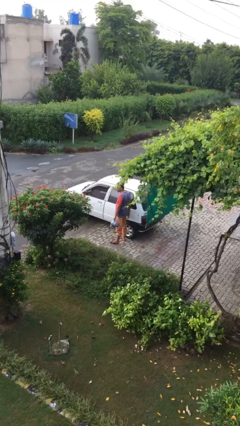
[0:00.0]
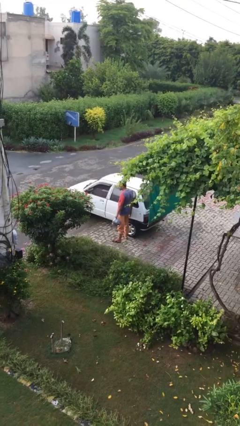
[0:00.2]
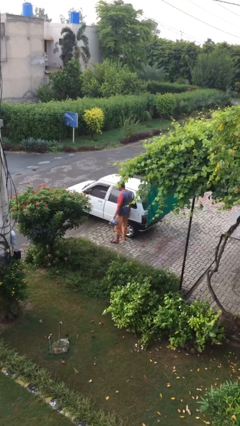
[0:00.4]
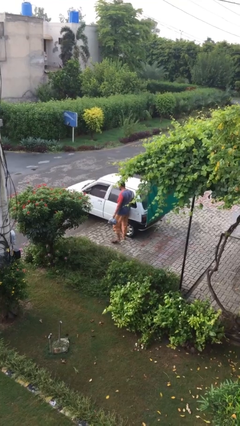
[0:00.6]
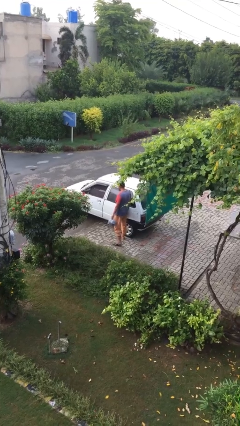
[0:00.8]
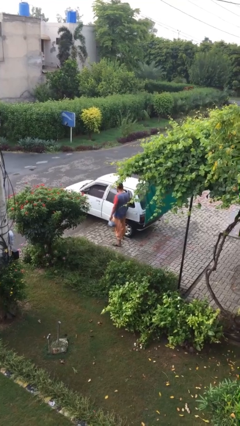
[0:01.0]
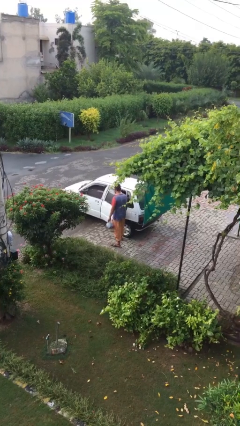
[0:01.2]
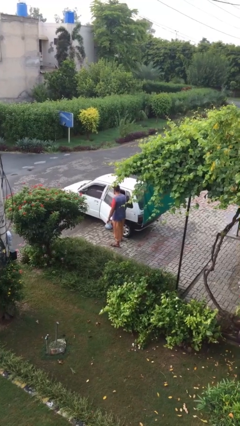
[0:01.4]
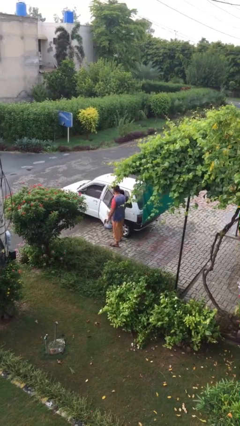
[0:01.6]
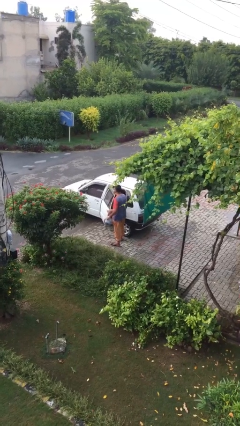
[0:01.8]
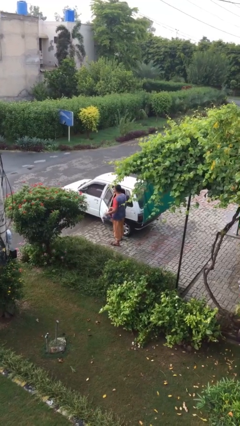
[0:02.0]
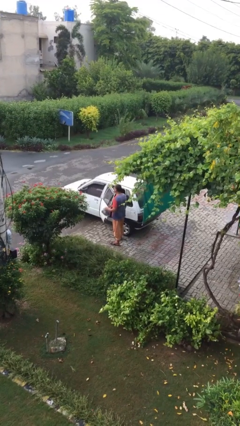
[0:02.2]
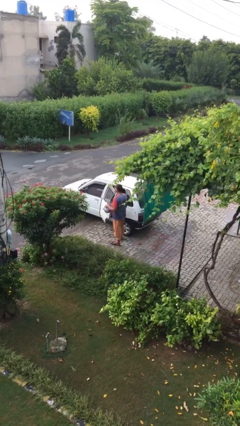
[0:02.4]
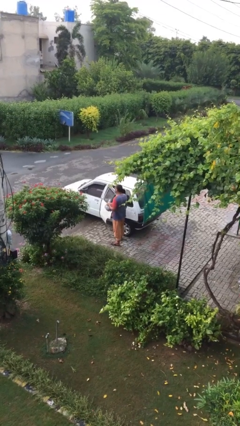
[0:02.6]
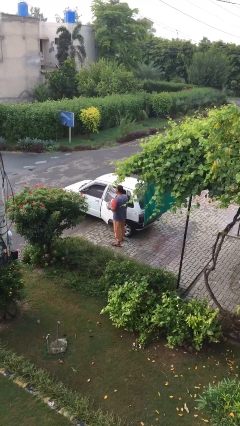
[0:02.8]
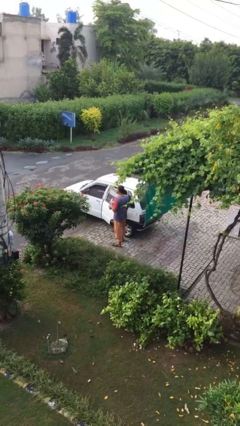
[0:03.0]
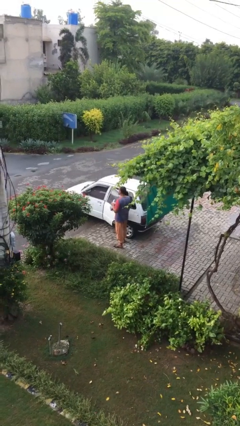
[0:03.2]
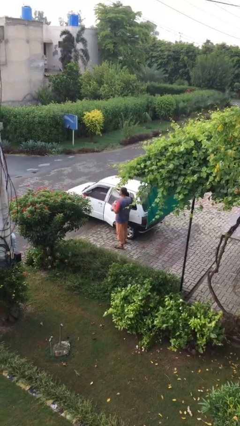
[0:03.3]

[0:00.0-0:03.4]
person opens car door

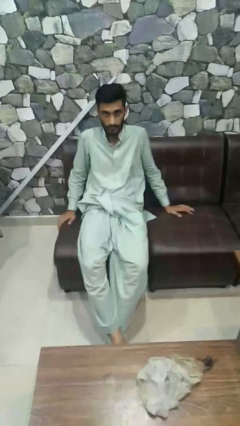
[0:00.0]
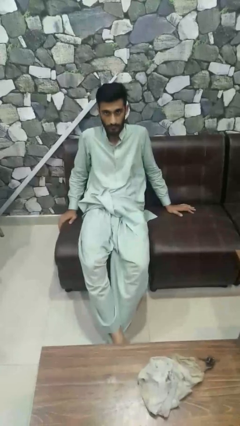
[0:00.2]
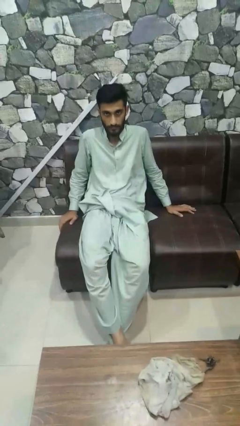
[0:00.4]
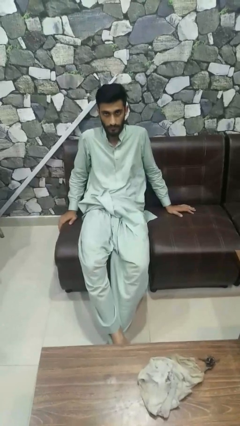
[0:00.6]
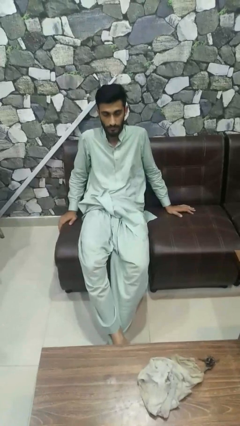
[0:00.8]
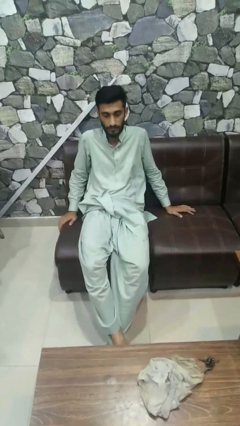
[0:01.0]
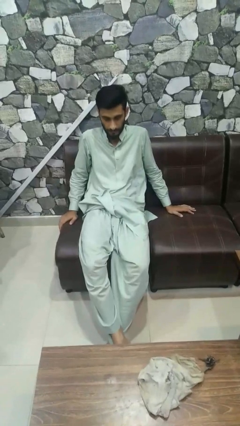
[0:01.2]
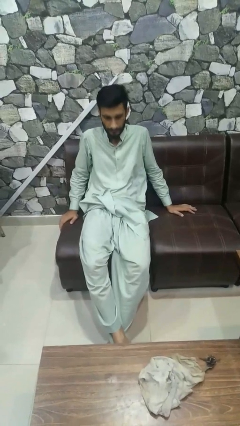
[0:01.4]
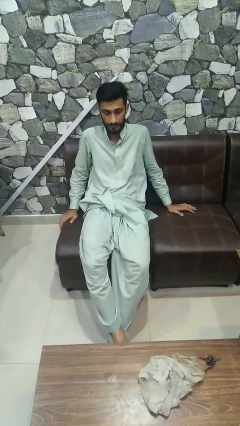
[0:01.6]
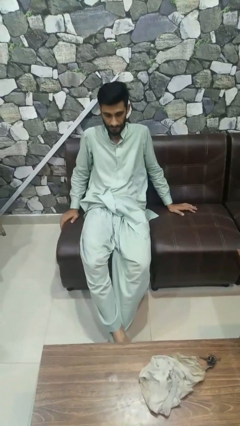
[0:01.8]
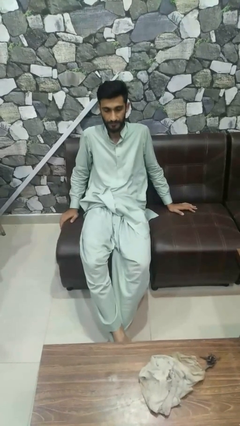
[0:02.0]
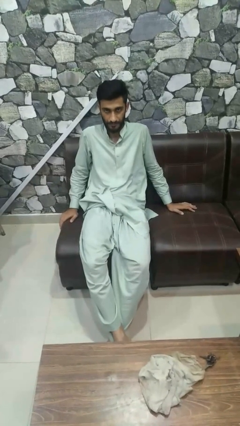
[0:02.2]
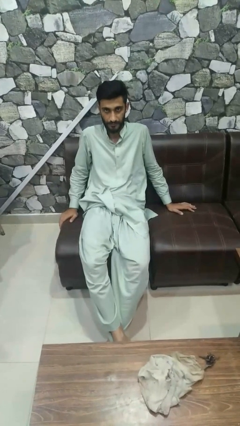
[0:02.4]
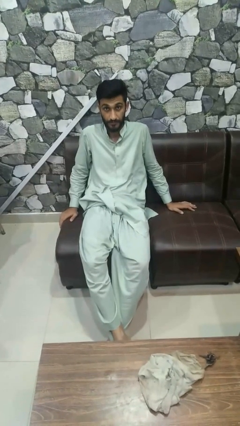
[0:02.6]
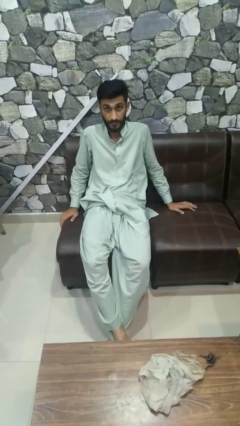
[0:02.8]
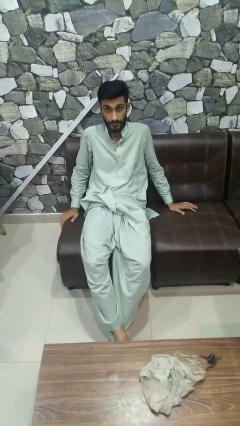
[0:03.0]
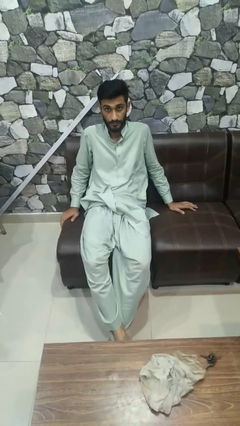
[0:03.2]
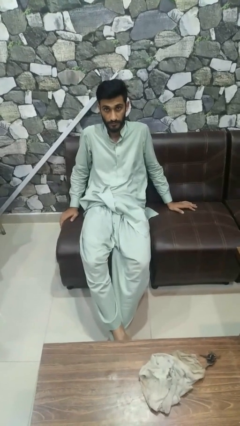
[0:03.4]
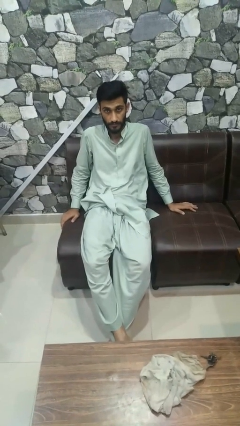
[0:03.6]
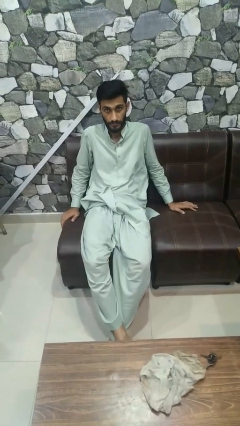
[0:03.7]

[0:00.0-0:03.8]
person nods head

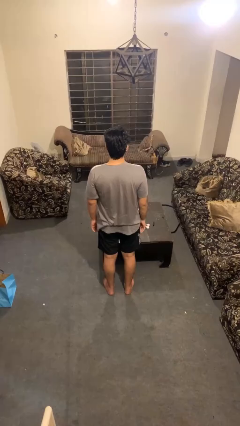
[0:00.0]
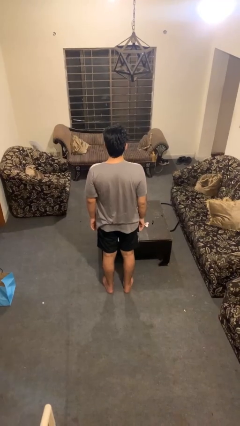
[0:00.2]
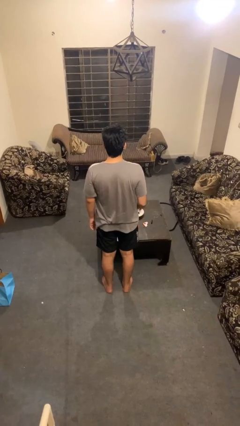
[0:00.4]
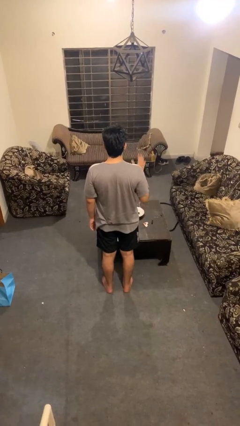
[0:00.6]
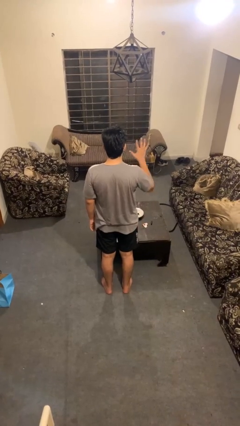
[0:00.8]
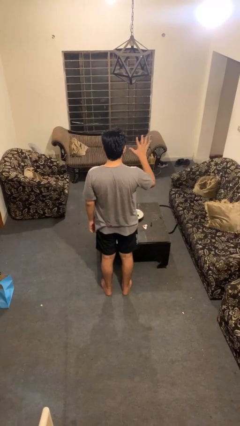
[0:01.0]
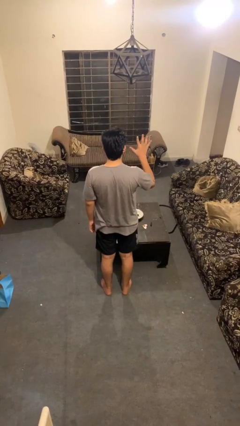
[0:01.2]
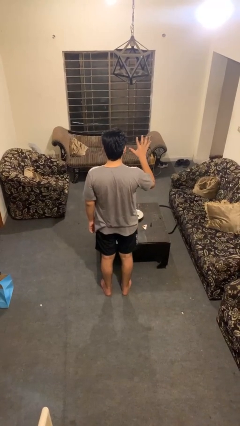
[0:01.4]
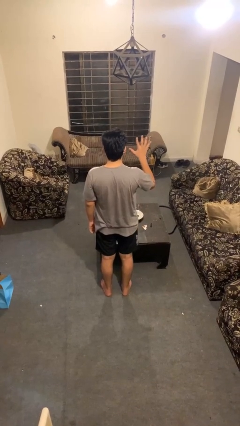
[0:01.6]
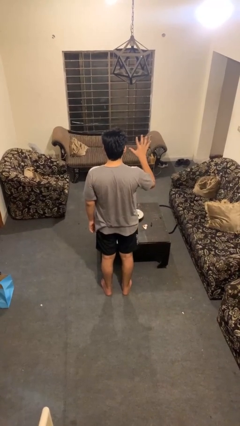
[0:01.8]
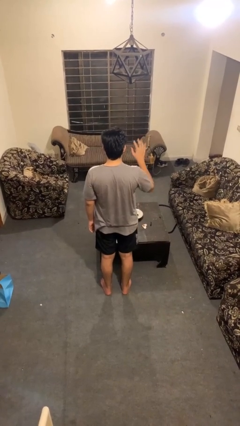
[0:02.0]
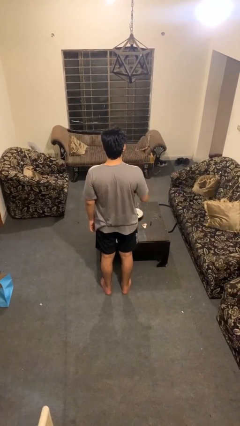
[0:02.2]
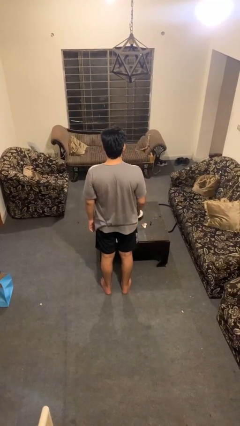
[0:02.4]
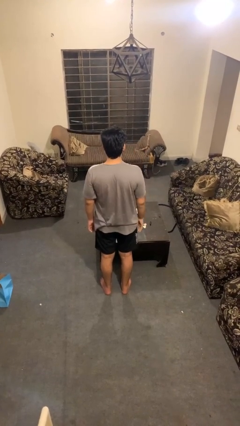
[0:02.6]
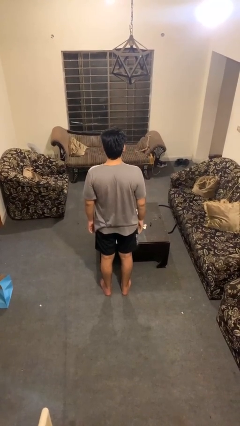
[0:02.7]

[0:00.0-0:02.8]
person gestures number five

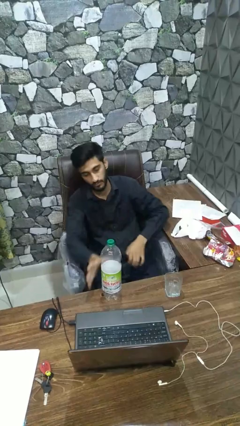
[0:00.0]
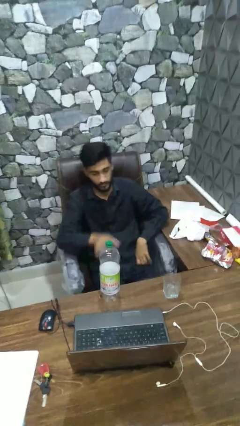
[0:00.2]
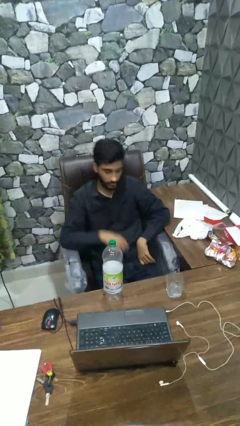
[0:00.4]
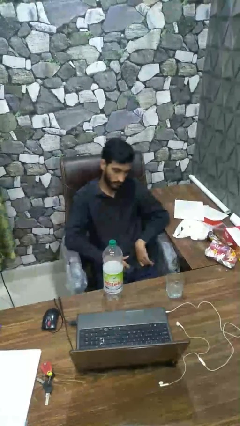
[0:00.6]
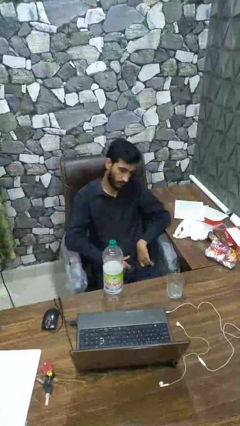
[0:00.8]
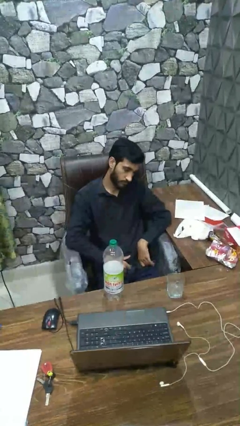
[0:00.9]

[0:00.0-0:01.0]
person screws lid to bottle

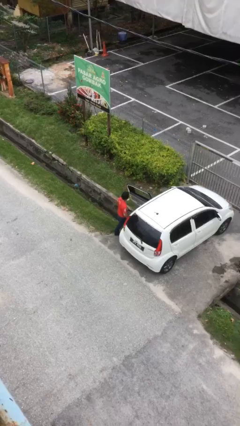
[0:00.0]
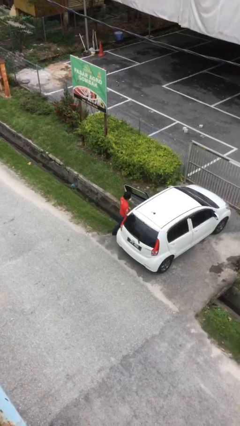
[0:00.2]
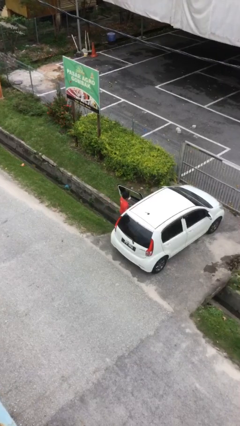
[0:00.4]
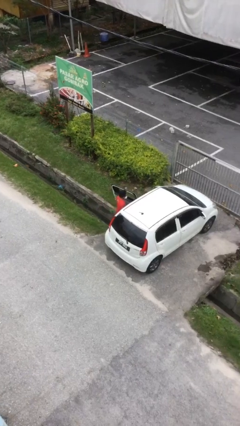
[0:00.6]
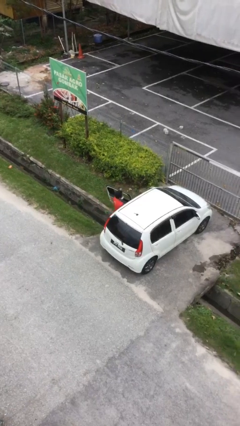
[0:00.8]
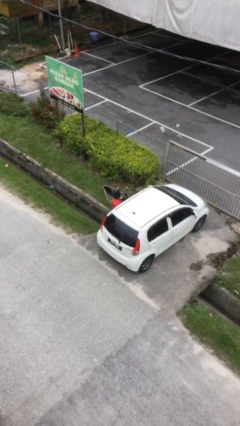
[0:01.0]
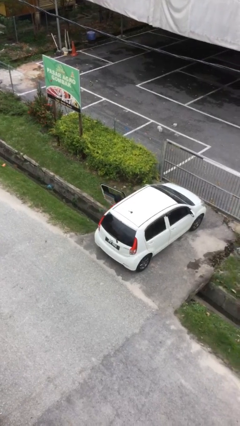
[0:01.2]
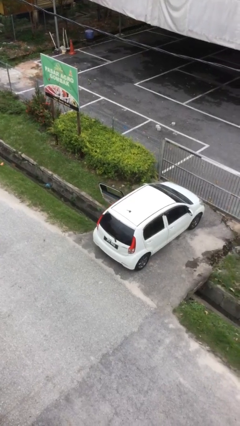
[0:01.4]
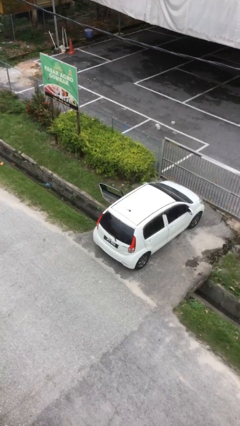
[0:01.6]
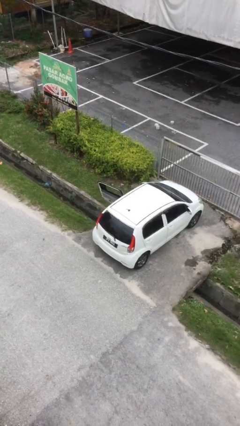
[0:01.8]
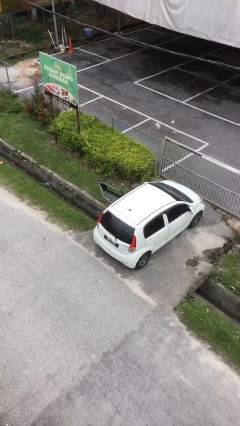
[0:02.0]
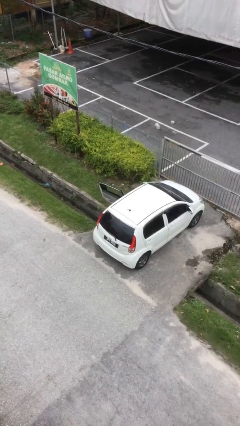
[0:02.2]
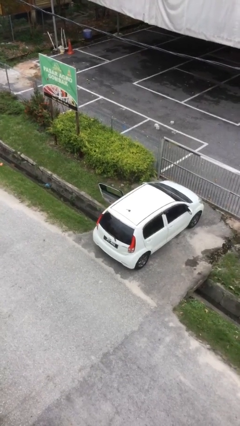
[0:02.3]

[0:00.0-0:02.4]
person enters car

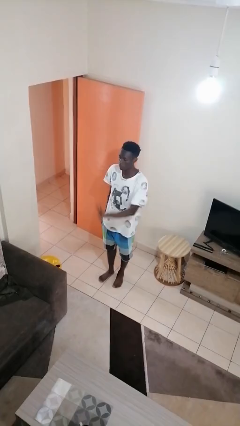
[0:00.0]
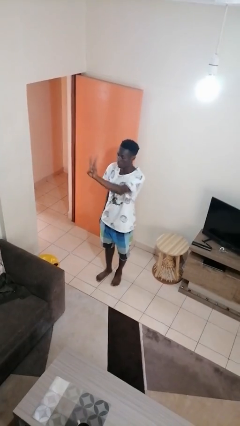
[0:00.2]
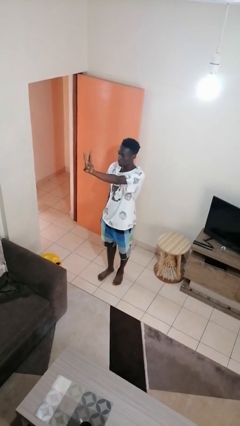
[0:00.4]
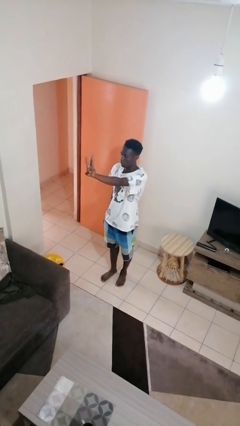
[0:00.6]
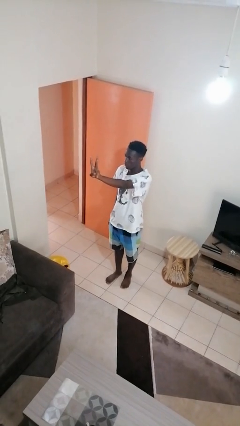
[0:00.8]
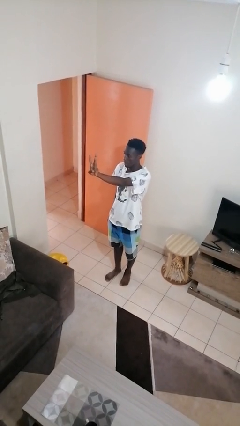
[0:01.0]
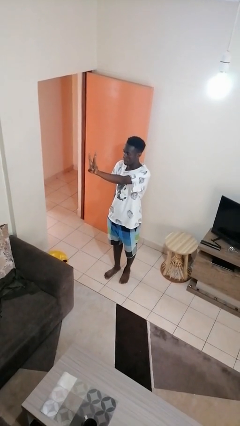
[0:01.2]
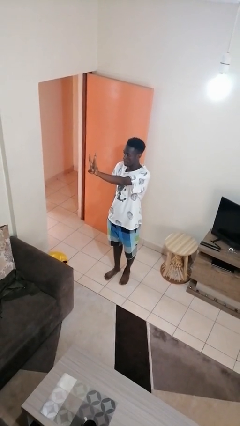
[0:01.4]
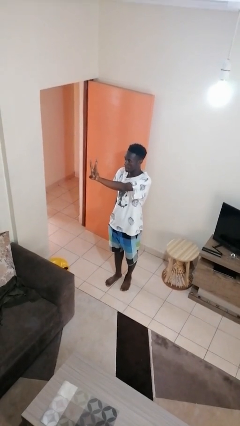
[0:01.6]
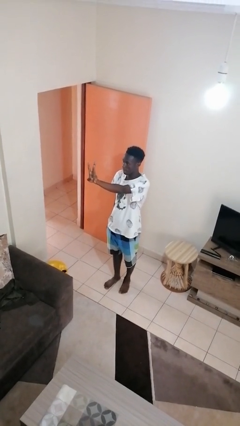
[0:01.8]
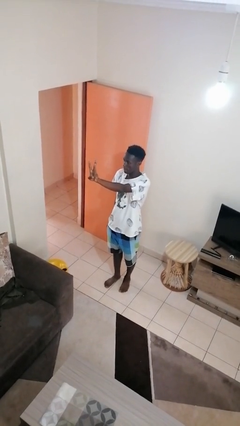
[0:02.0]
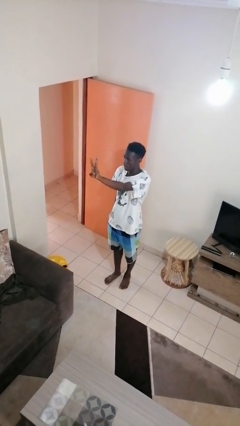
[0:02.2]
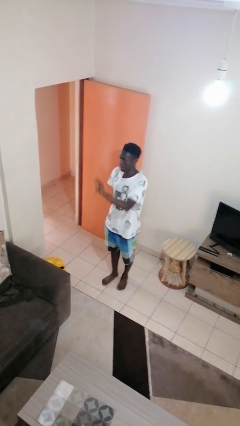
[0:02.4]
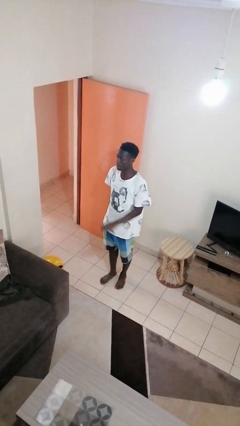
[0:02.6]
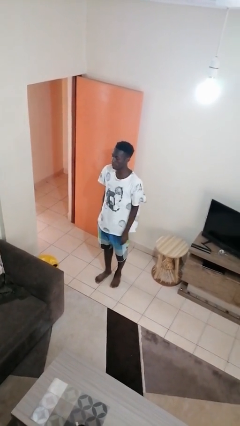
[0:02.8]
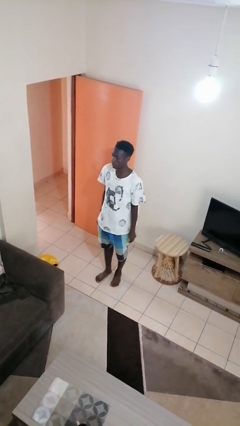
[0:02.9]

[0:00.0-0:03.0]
person gestures number three

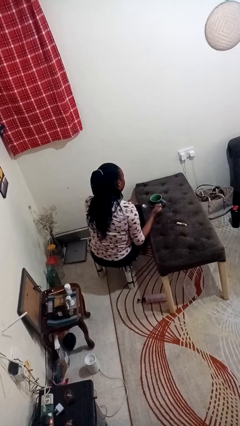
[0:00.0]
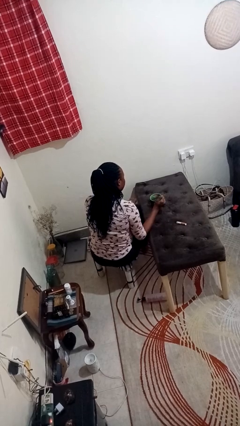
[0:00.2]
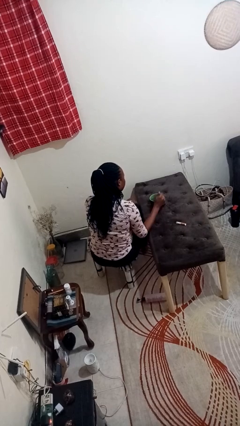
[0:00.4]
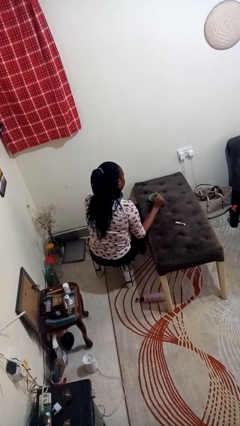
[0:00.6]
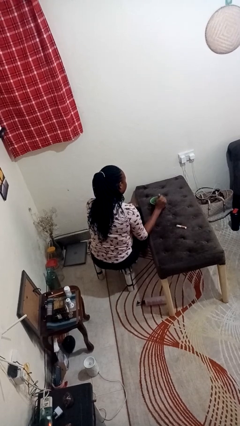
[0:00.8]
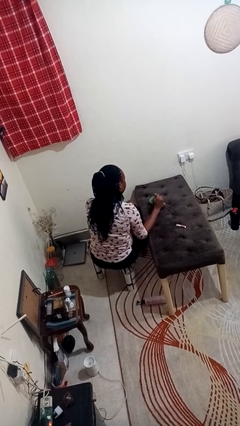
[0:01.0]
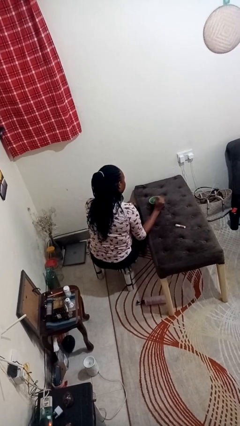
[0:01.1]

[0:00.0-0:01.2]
person stirs mug
